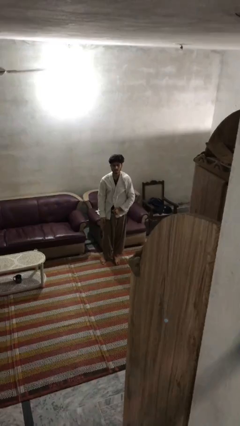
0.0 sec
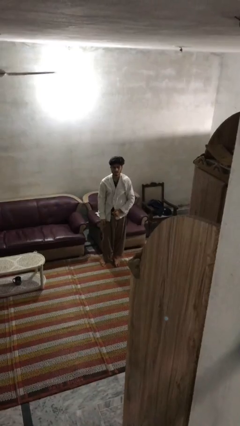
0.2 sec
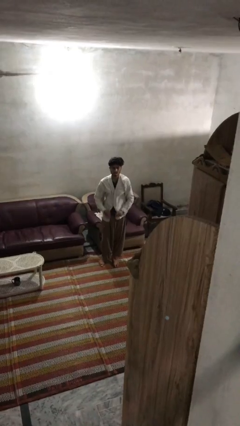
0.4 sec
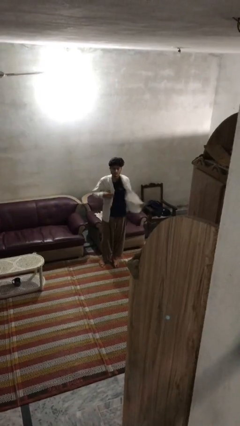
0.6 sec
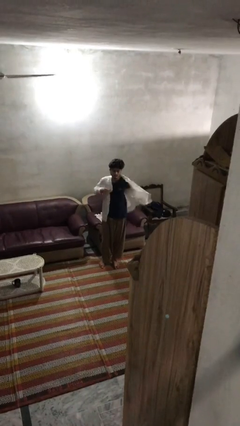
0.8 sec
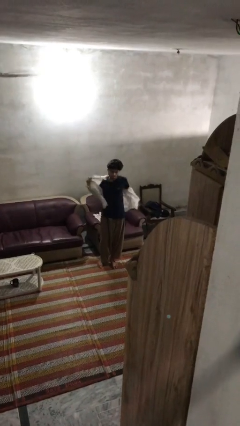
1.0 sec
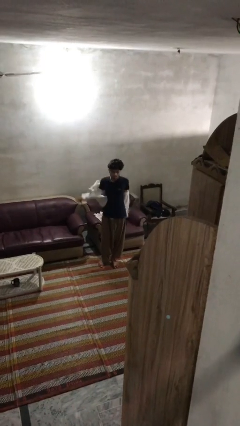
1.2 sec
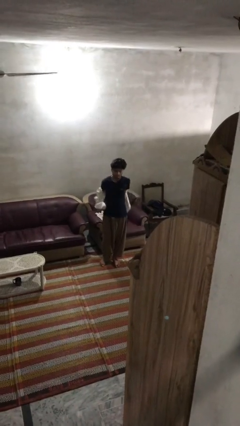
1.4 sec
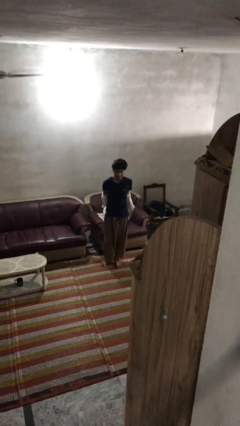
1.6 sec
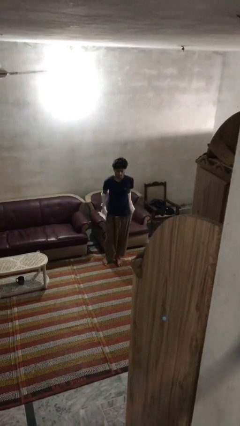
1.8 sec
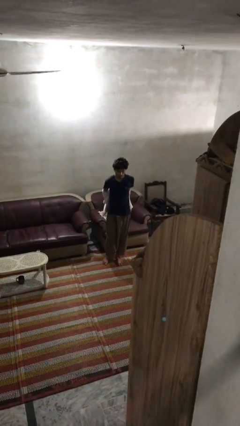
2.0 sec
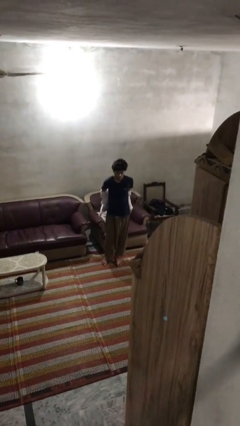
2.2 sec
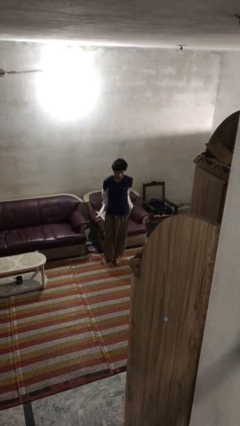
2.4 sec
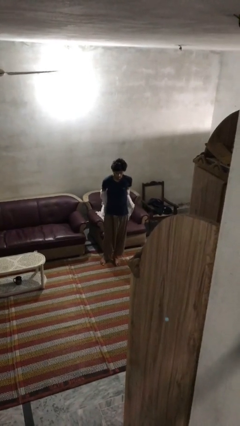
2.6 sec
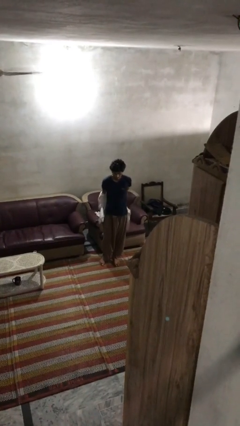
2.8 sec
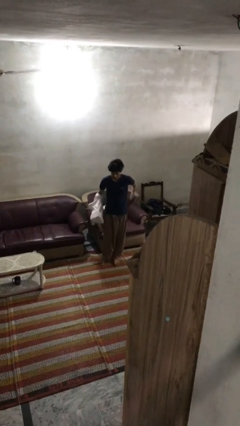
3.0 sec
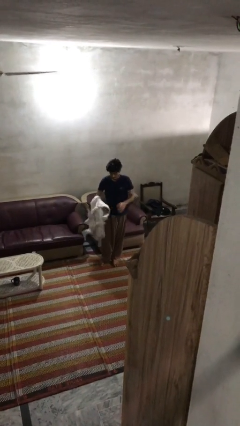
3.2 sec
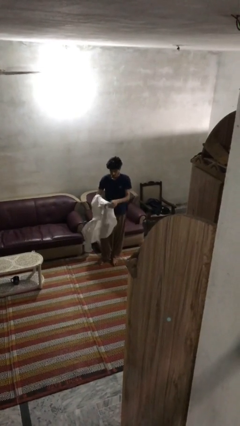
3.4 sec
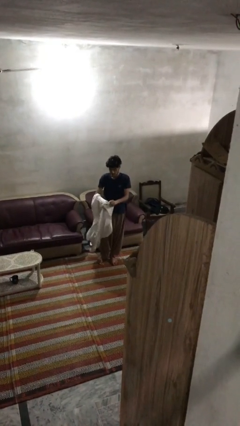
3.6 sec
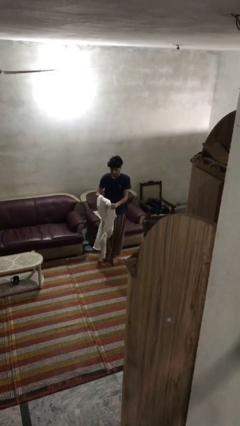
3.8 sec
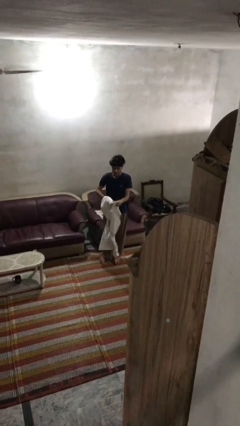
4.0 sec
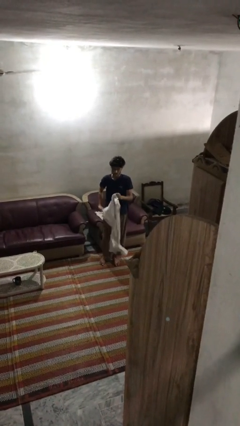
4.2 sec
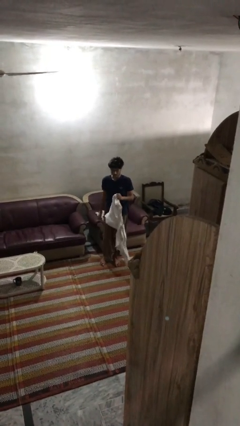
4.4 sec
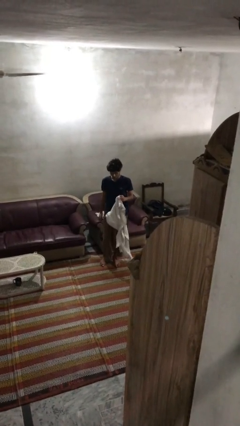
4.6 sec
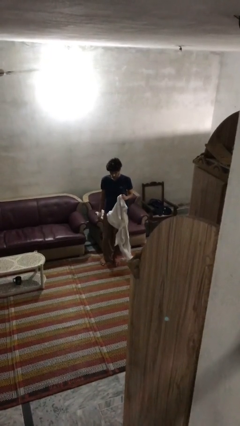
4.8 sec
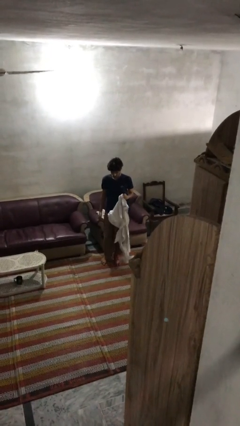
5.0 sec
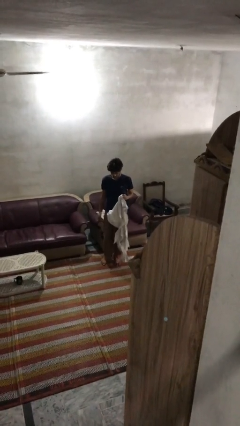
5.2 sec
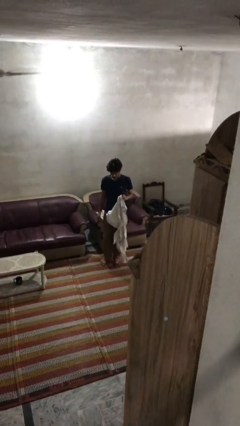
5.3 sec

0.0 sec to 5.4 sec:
person takes off shirt

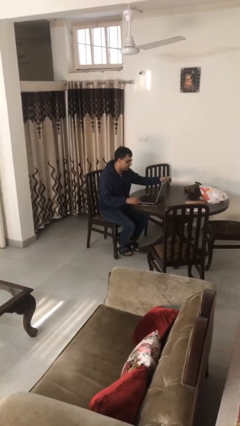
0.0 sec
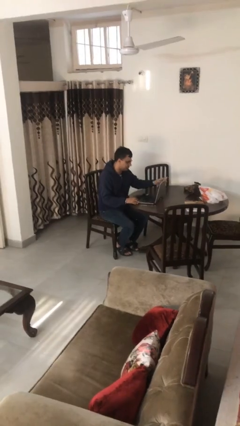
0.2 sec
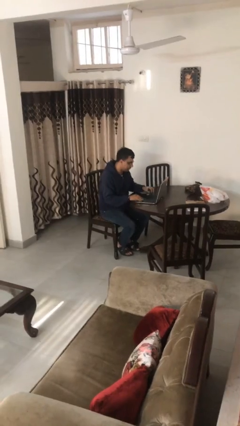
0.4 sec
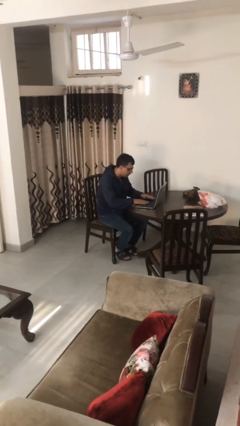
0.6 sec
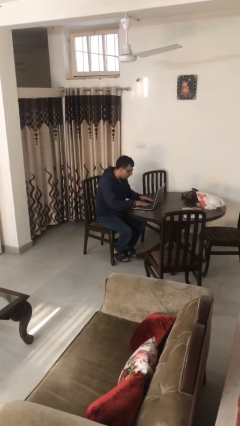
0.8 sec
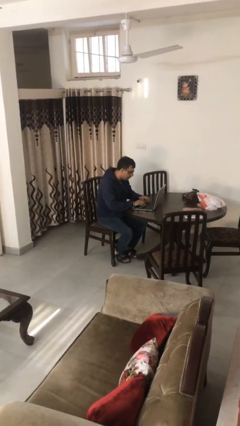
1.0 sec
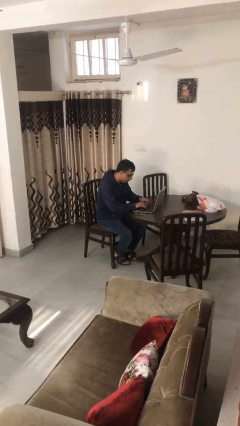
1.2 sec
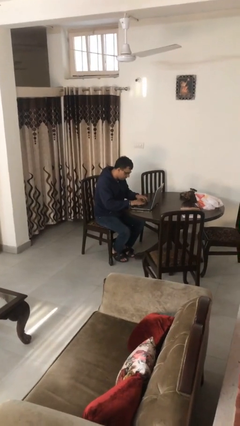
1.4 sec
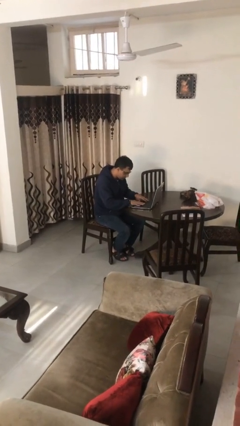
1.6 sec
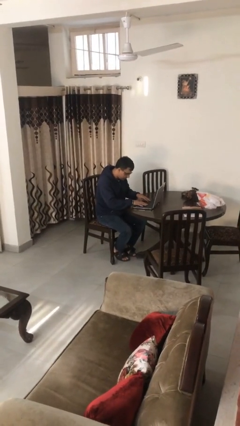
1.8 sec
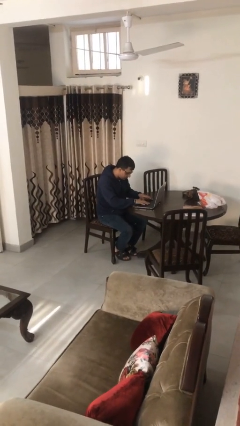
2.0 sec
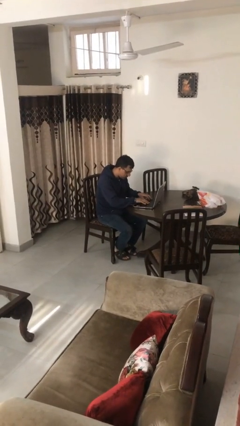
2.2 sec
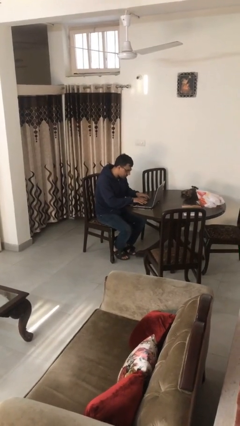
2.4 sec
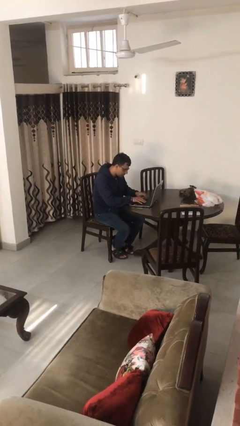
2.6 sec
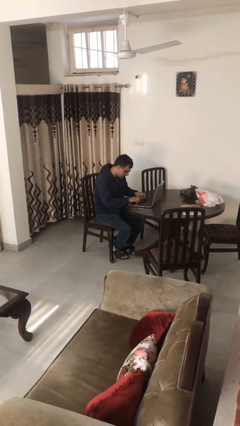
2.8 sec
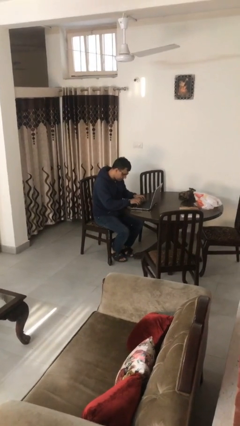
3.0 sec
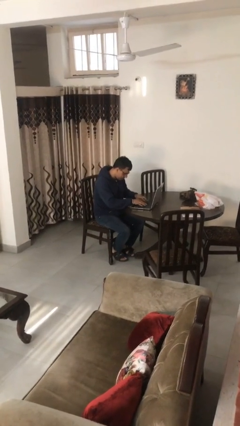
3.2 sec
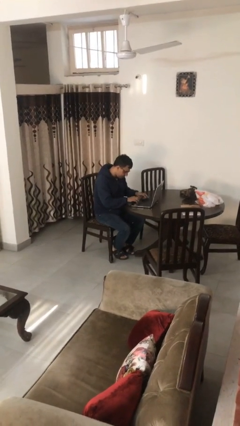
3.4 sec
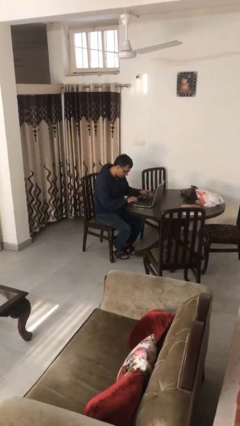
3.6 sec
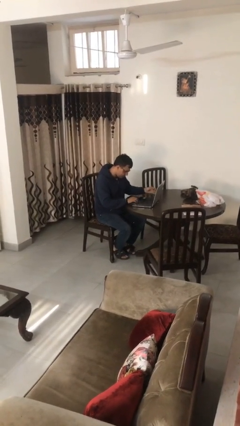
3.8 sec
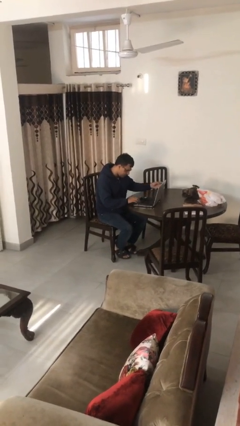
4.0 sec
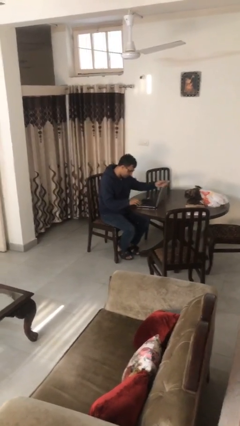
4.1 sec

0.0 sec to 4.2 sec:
person interacts with laptop

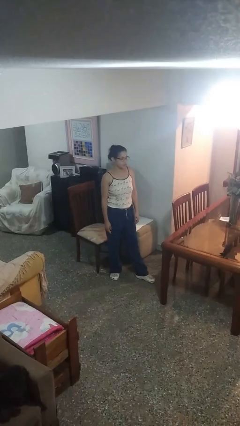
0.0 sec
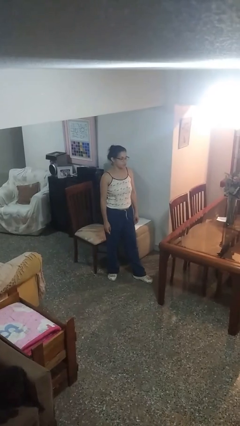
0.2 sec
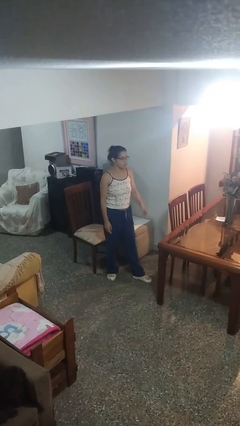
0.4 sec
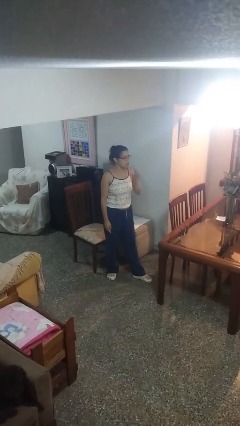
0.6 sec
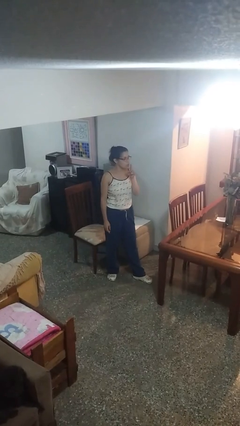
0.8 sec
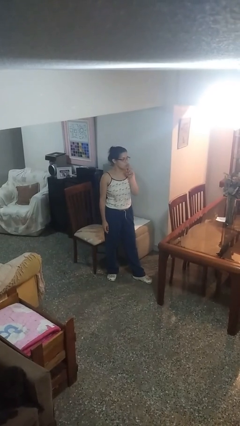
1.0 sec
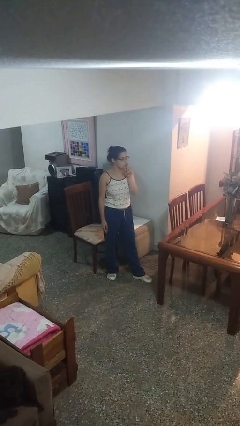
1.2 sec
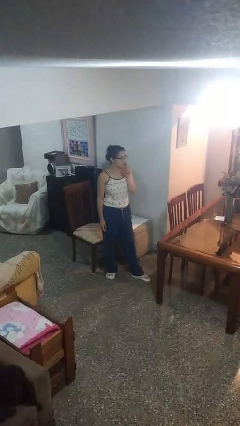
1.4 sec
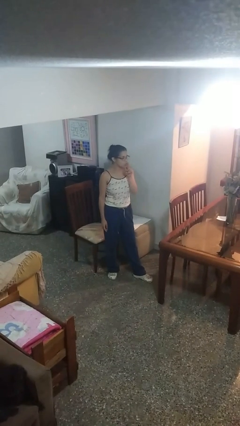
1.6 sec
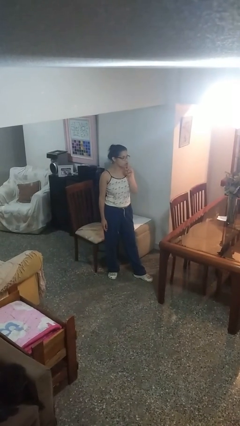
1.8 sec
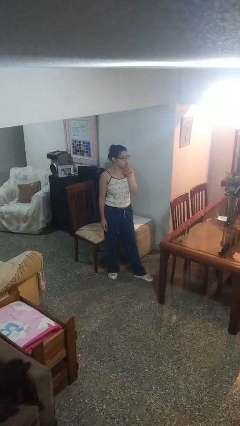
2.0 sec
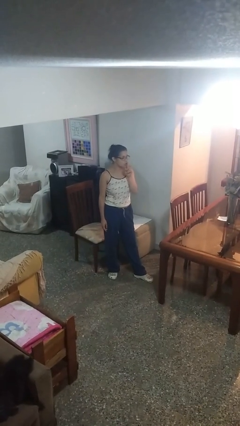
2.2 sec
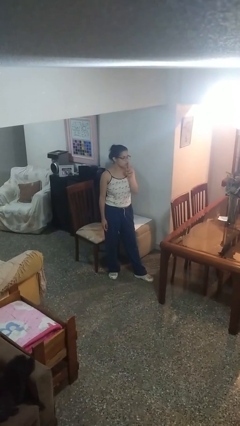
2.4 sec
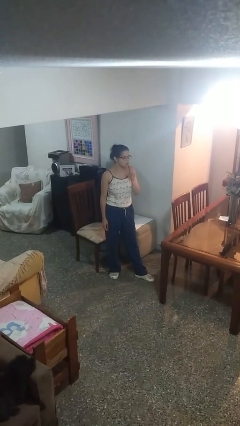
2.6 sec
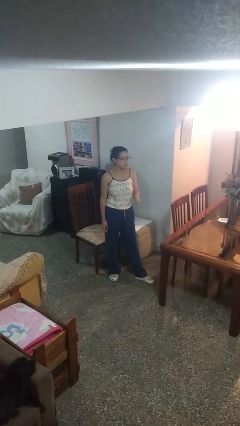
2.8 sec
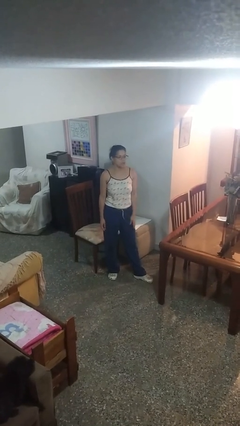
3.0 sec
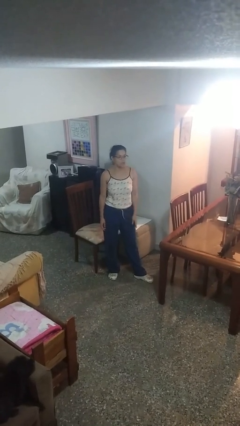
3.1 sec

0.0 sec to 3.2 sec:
person gestures be quiet

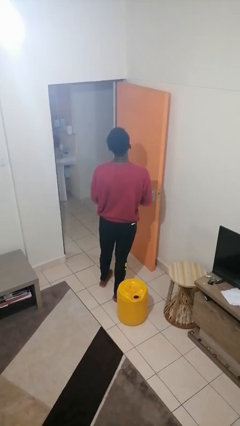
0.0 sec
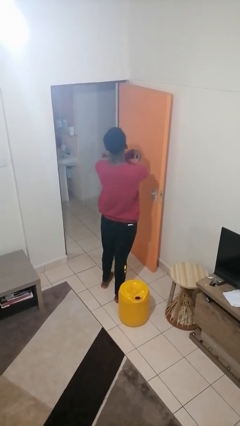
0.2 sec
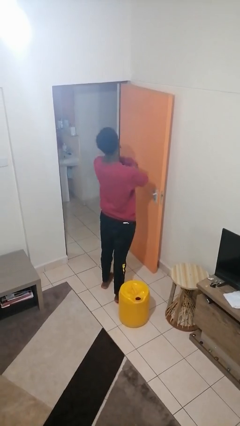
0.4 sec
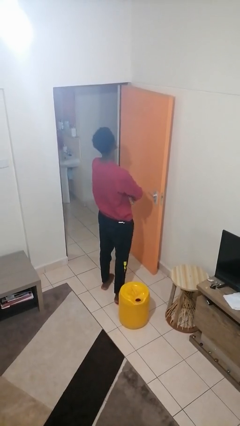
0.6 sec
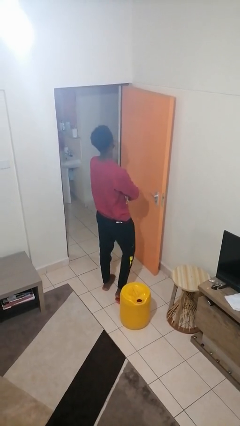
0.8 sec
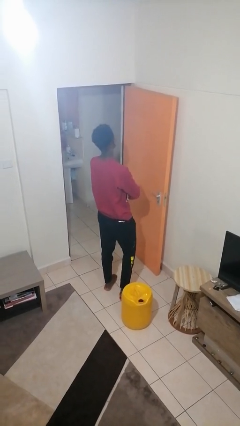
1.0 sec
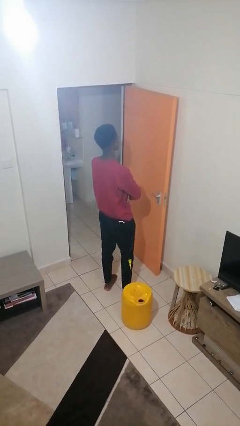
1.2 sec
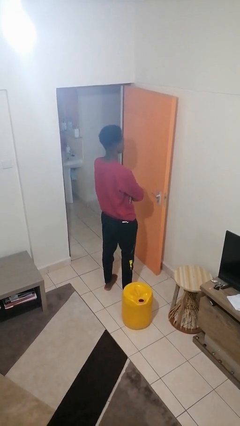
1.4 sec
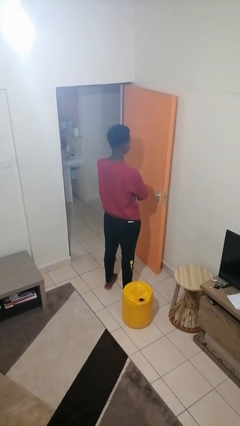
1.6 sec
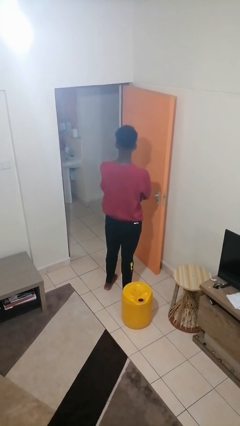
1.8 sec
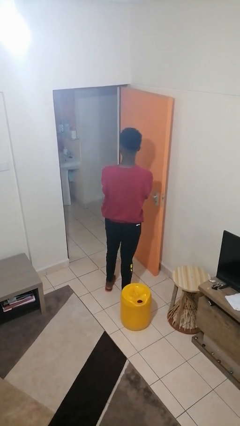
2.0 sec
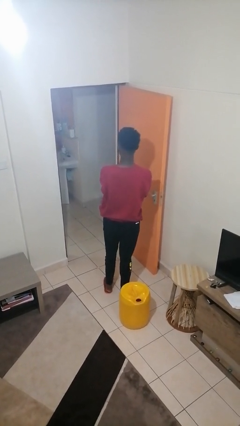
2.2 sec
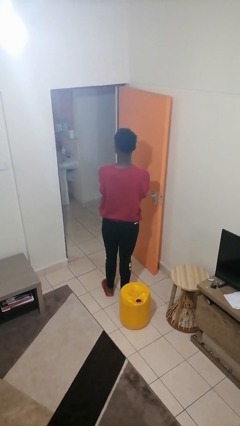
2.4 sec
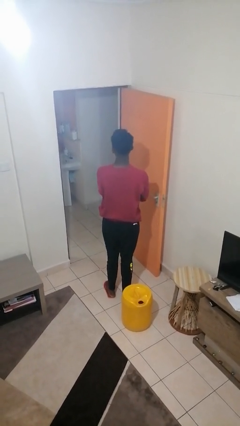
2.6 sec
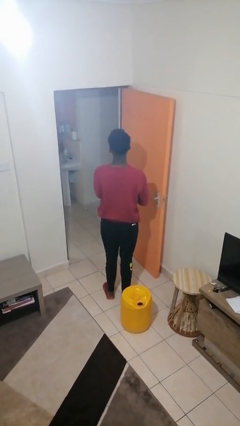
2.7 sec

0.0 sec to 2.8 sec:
person crosses arms

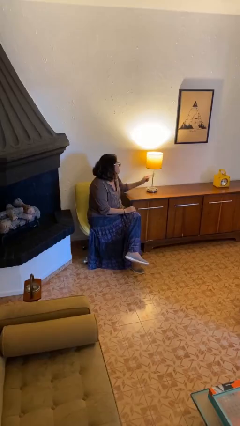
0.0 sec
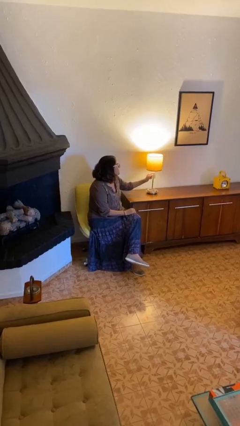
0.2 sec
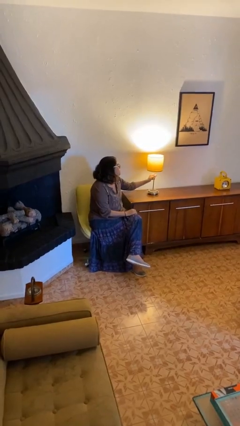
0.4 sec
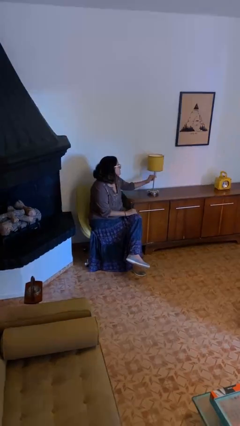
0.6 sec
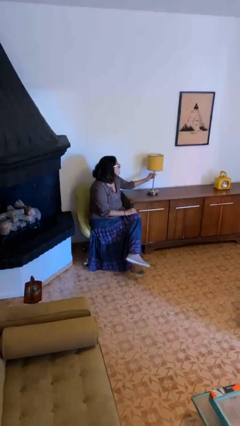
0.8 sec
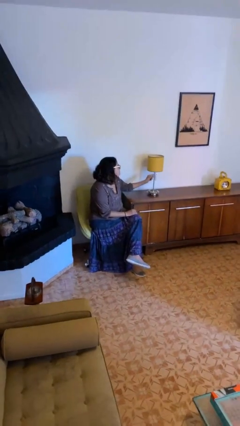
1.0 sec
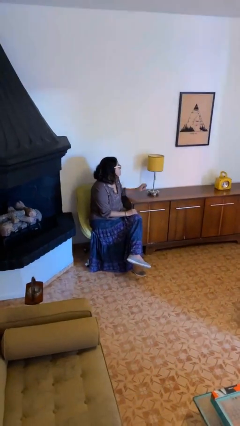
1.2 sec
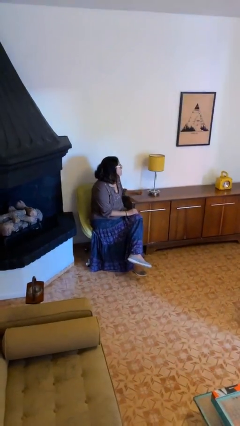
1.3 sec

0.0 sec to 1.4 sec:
person turns off lamp

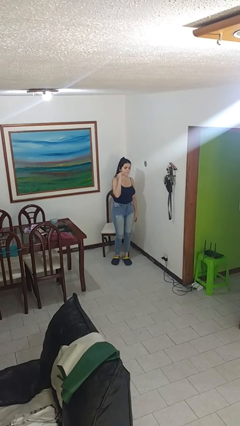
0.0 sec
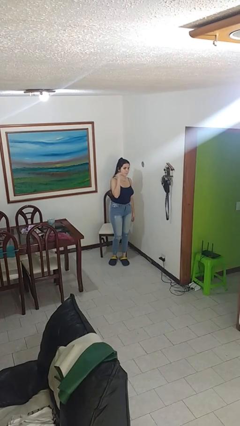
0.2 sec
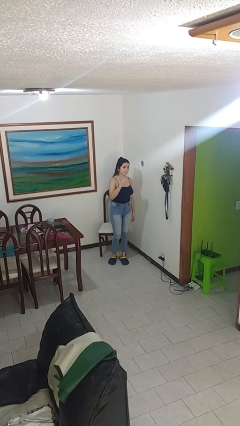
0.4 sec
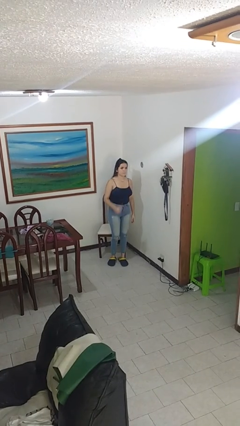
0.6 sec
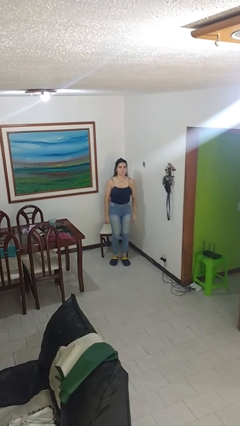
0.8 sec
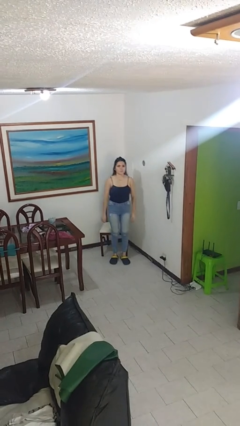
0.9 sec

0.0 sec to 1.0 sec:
person gestures behind me
